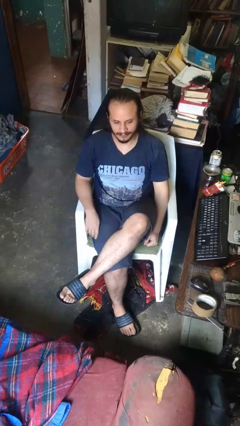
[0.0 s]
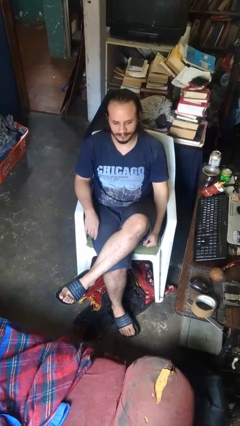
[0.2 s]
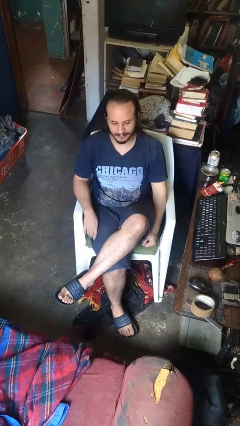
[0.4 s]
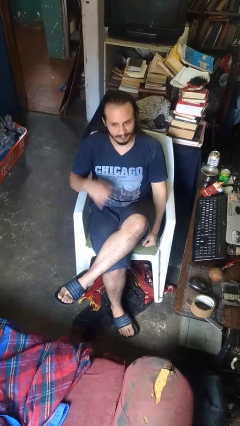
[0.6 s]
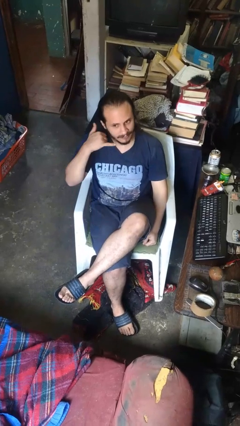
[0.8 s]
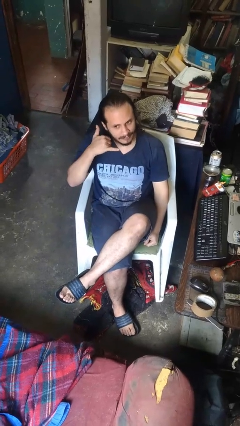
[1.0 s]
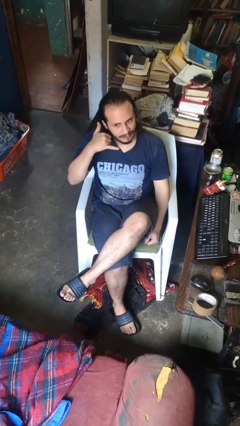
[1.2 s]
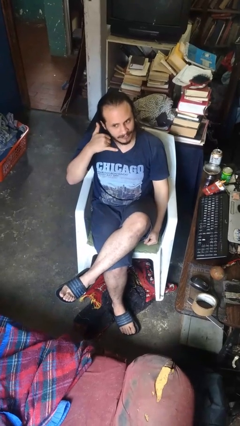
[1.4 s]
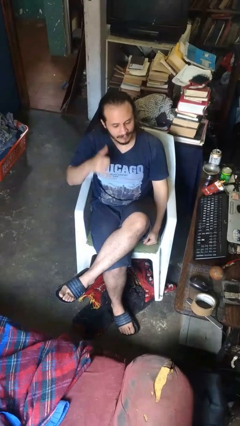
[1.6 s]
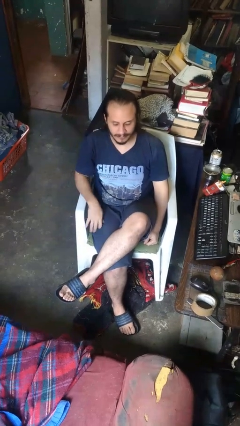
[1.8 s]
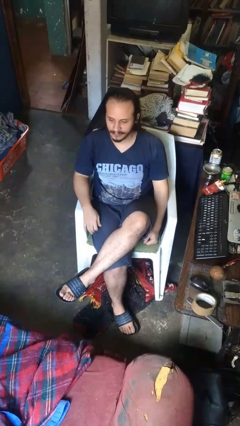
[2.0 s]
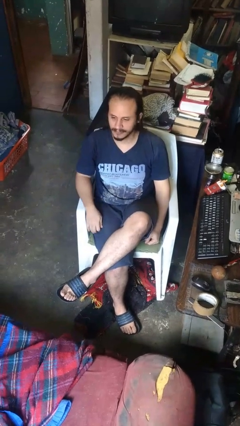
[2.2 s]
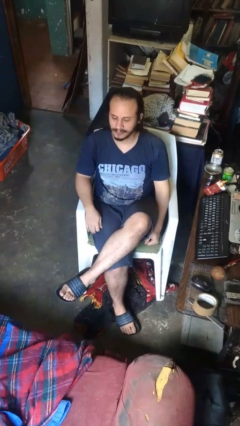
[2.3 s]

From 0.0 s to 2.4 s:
person gestures call me

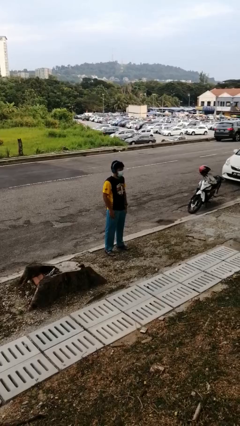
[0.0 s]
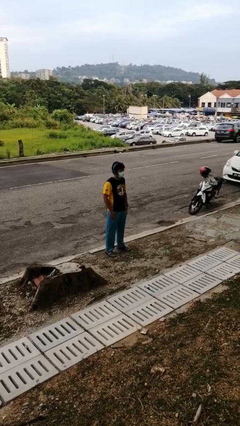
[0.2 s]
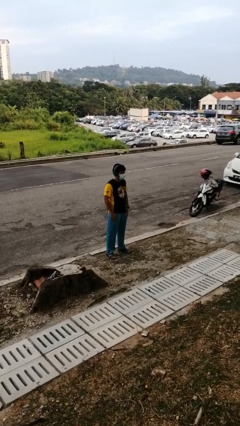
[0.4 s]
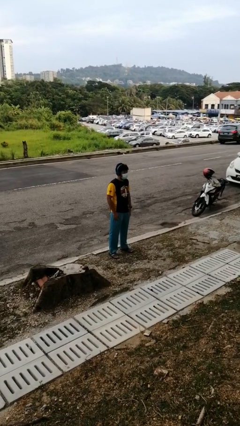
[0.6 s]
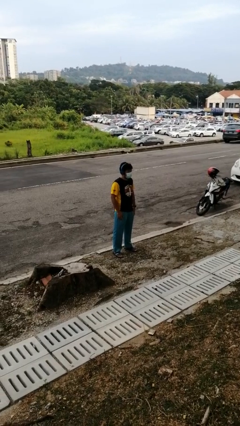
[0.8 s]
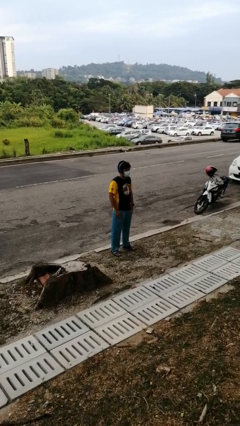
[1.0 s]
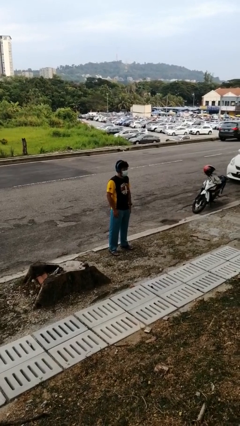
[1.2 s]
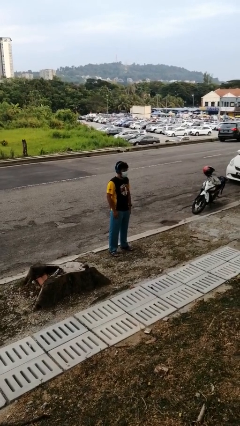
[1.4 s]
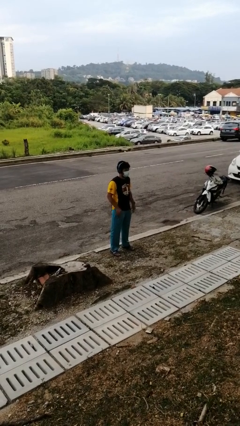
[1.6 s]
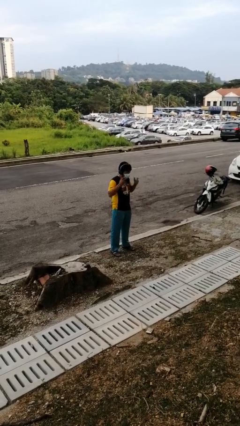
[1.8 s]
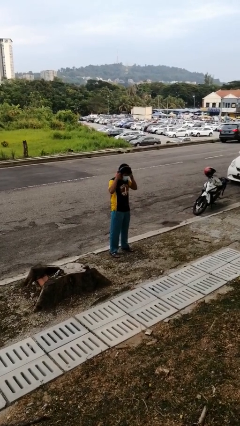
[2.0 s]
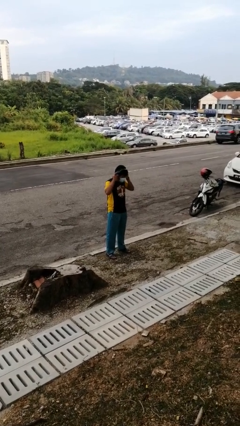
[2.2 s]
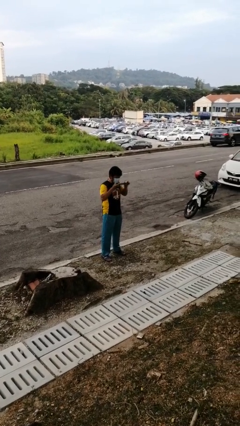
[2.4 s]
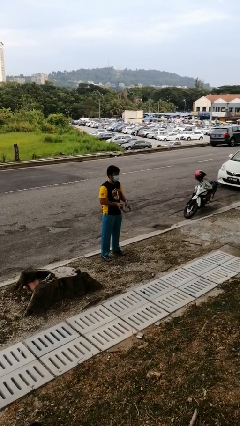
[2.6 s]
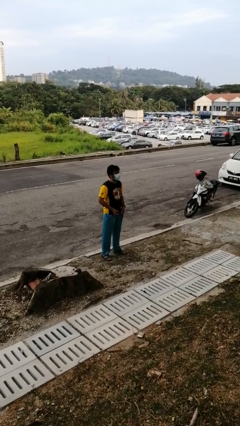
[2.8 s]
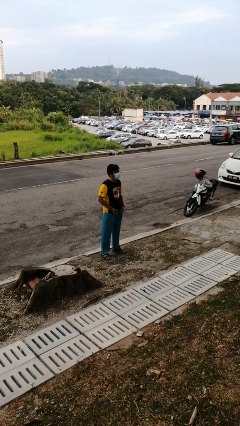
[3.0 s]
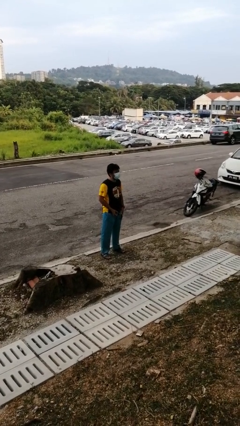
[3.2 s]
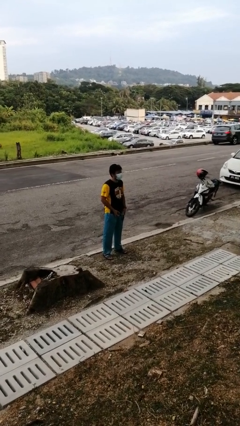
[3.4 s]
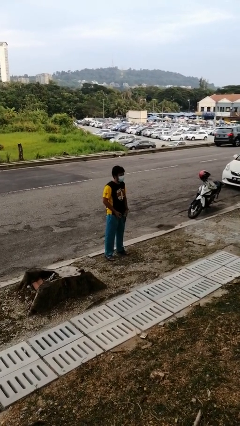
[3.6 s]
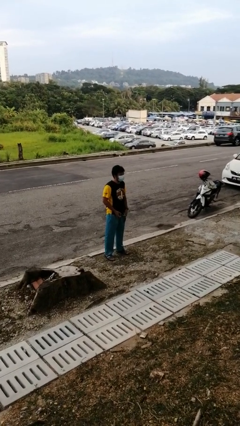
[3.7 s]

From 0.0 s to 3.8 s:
person takes off headphones

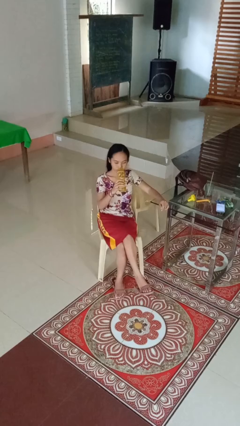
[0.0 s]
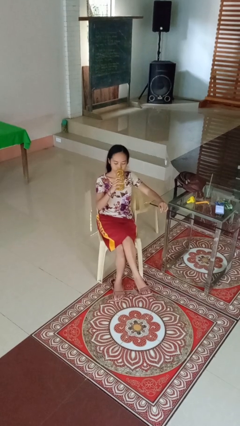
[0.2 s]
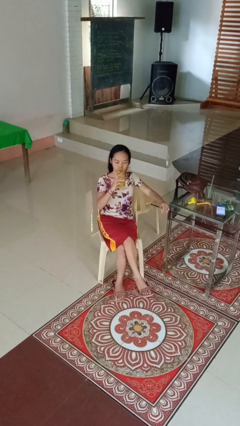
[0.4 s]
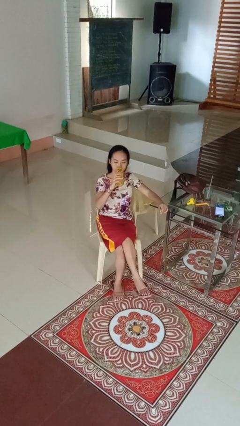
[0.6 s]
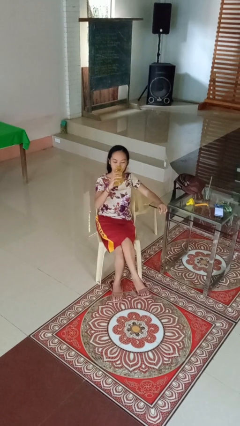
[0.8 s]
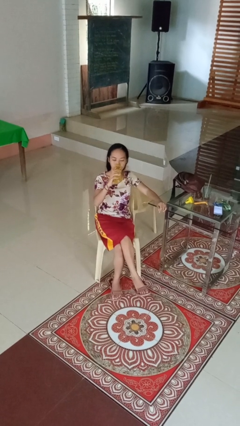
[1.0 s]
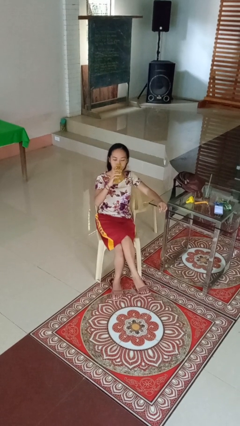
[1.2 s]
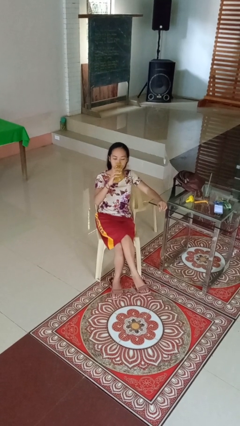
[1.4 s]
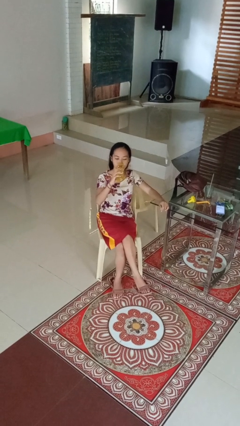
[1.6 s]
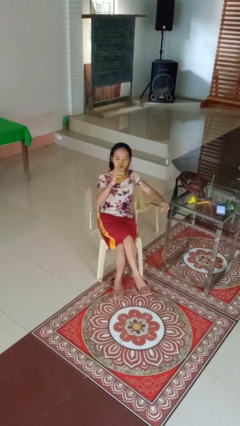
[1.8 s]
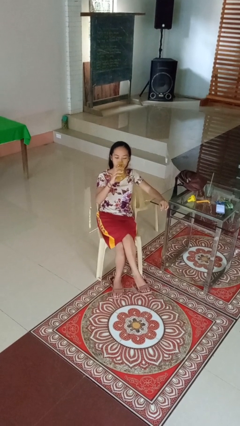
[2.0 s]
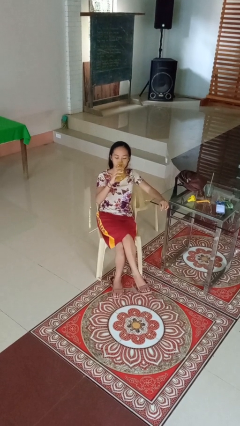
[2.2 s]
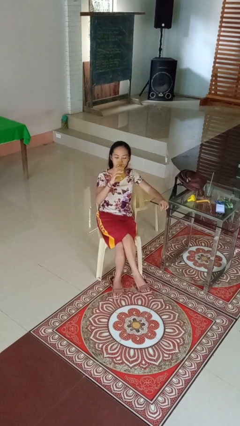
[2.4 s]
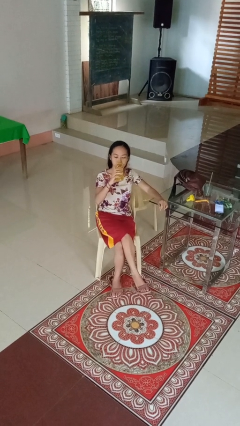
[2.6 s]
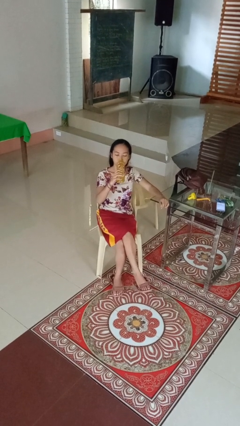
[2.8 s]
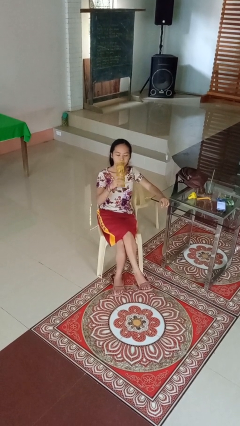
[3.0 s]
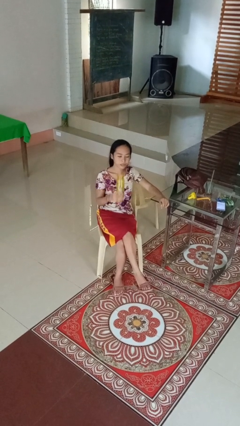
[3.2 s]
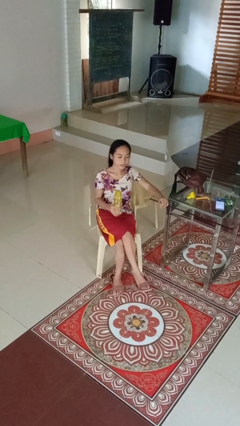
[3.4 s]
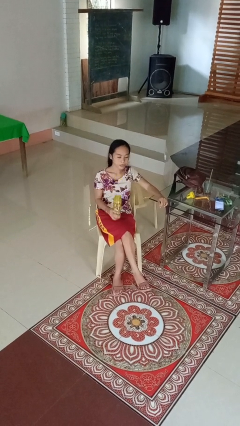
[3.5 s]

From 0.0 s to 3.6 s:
person drinks from bottle

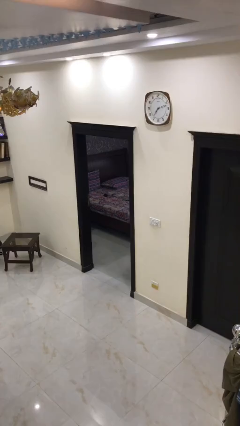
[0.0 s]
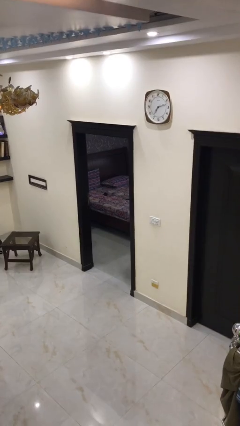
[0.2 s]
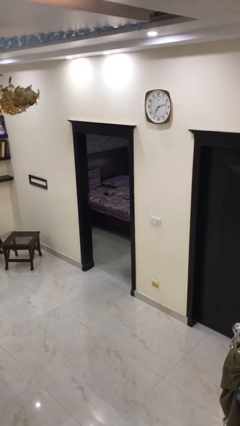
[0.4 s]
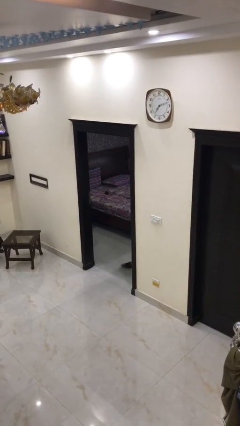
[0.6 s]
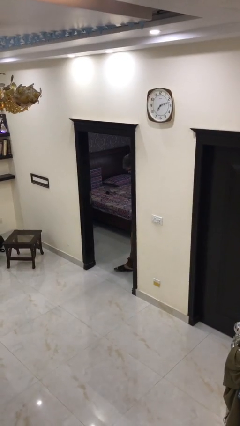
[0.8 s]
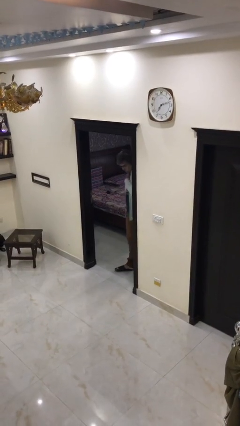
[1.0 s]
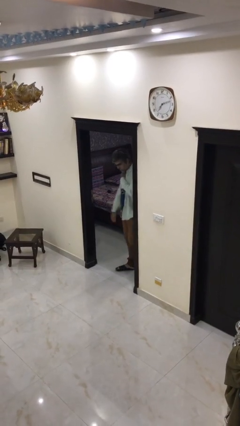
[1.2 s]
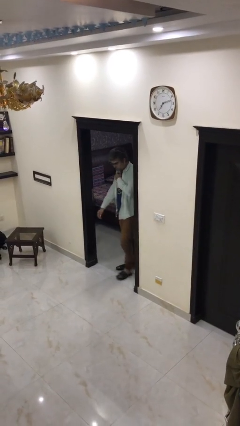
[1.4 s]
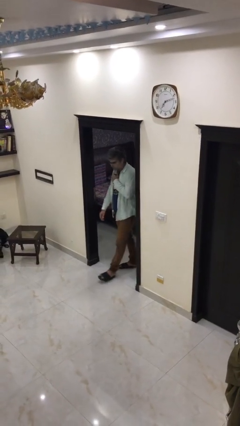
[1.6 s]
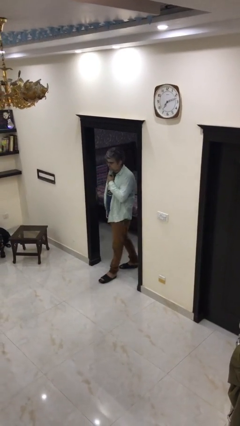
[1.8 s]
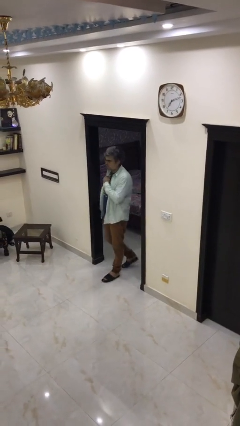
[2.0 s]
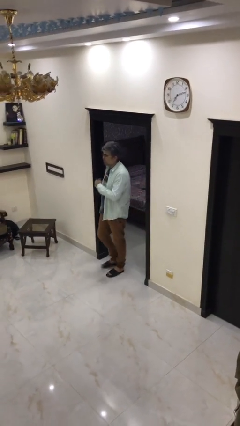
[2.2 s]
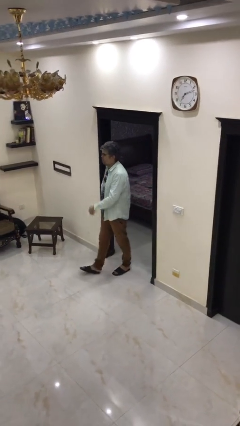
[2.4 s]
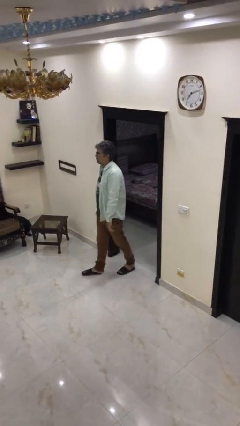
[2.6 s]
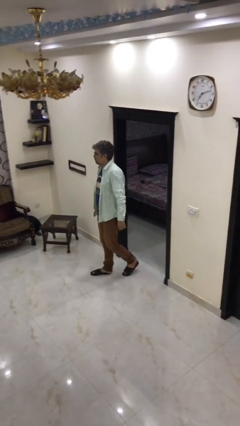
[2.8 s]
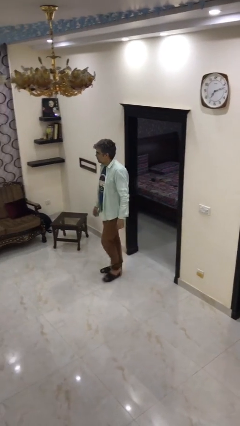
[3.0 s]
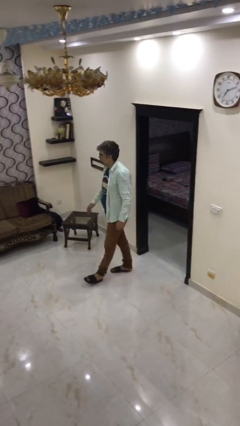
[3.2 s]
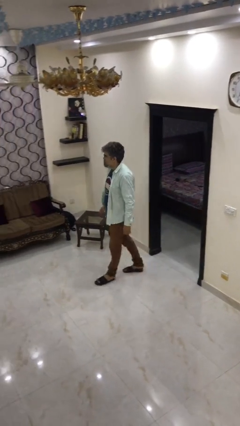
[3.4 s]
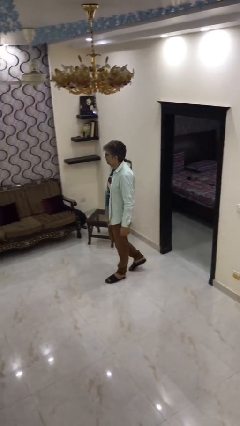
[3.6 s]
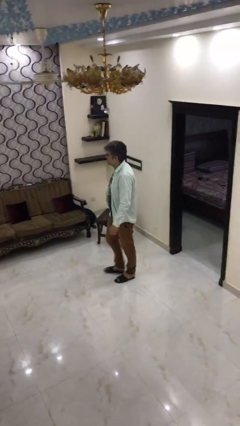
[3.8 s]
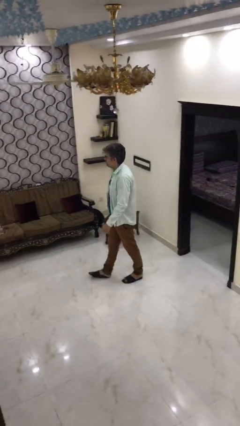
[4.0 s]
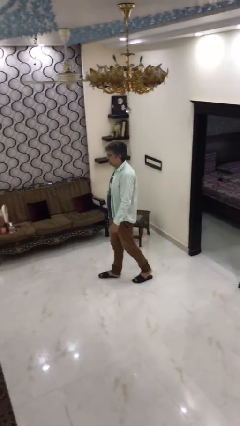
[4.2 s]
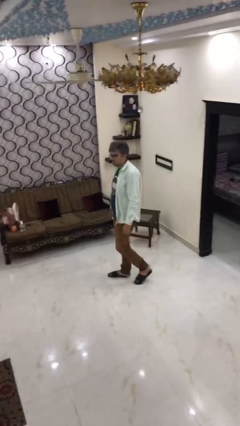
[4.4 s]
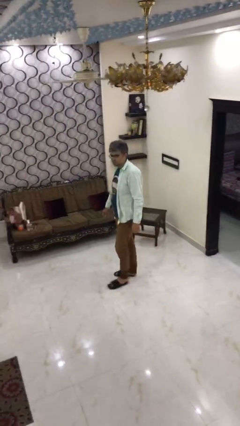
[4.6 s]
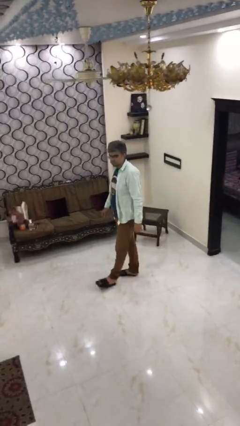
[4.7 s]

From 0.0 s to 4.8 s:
person enters scene through structure

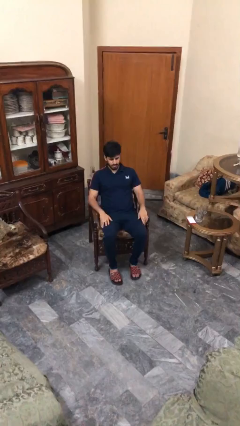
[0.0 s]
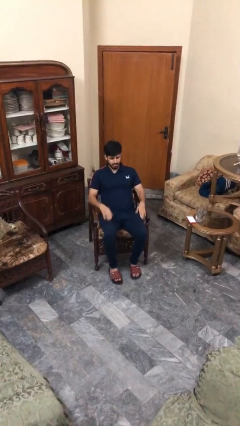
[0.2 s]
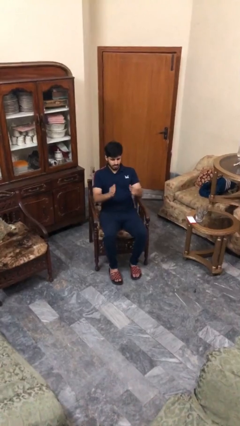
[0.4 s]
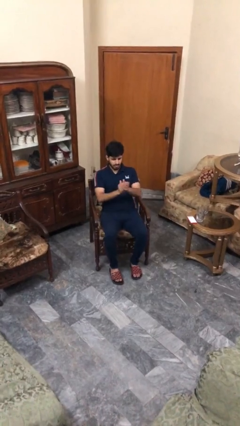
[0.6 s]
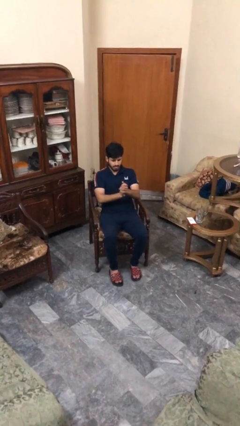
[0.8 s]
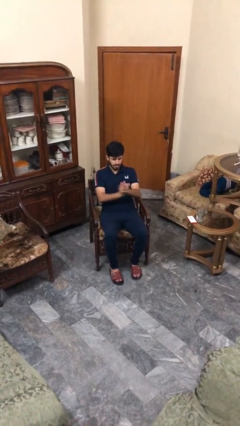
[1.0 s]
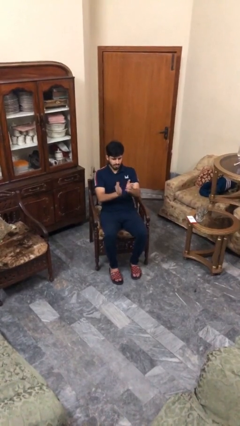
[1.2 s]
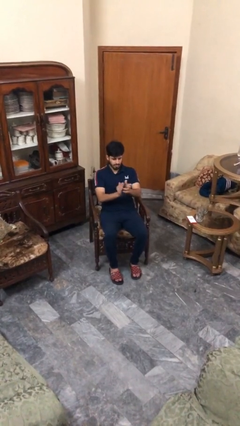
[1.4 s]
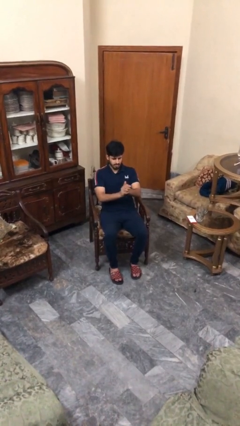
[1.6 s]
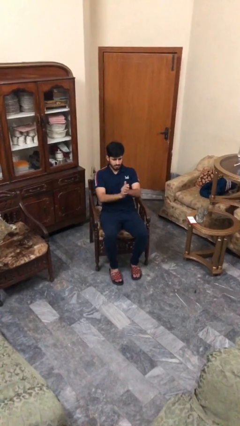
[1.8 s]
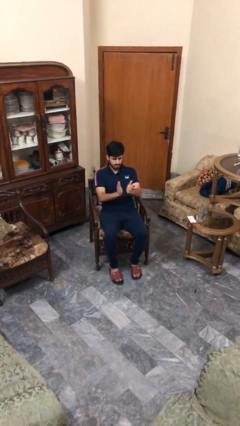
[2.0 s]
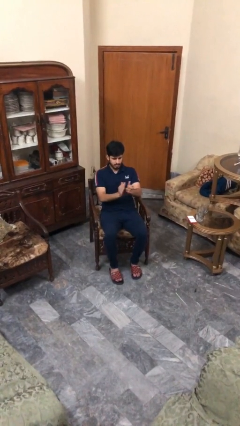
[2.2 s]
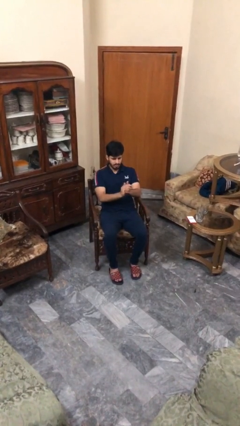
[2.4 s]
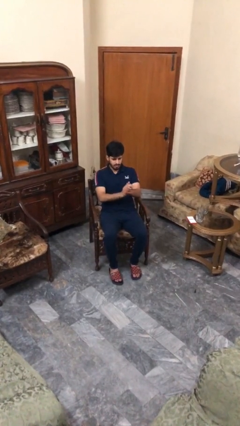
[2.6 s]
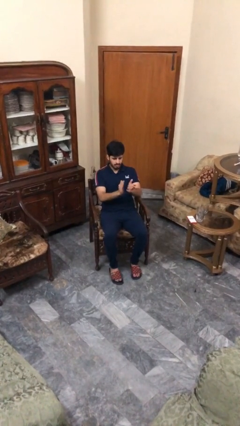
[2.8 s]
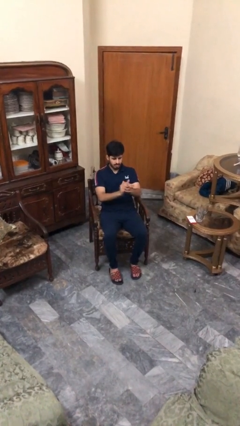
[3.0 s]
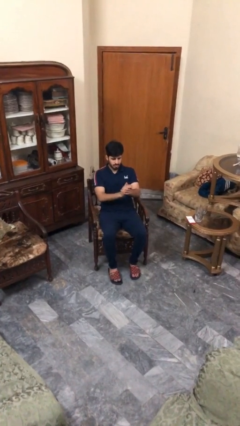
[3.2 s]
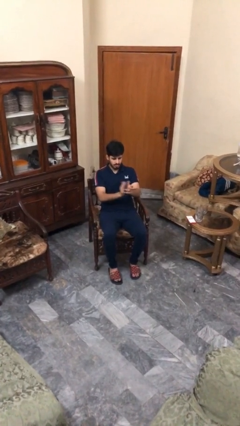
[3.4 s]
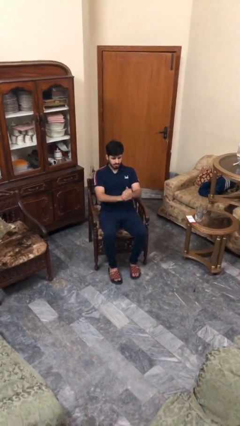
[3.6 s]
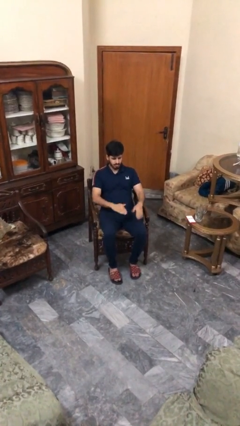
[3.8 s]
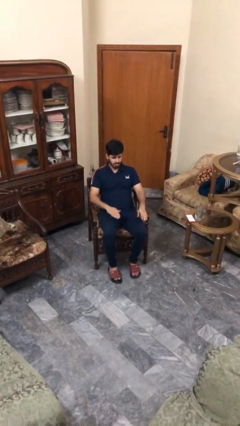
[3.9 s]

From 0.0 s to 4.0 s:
person claps hands
